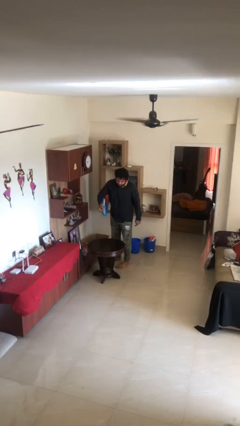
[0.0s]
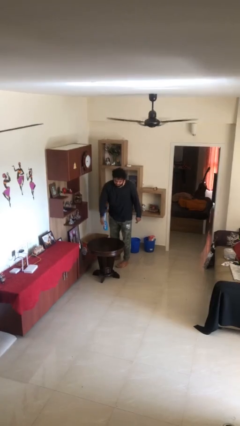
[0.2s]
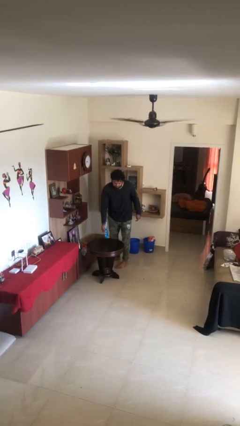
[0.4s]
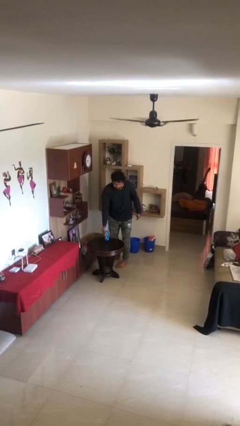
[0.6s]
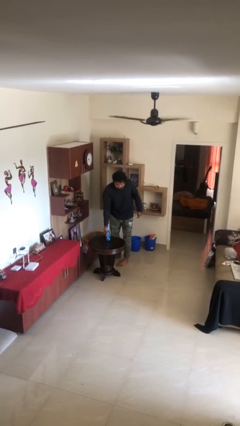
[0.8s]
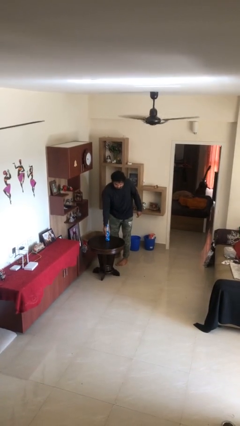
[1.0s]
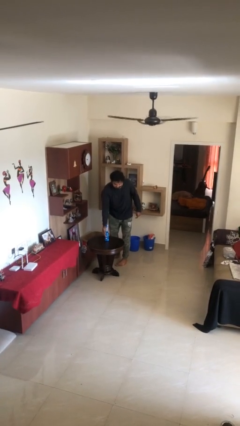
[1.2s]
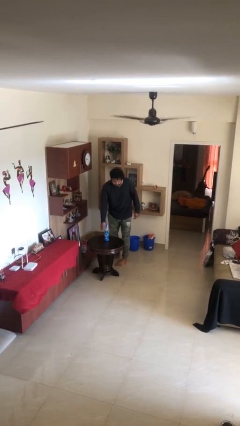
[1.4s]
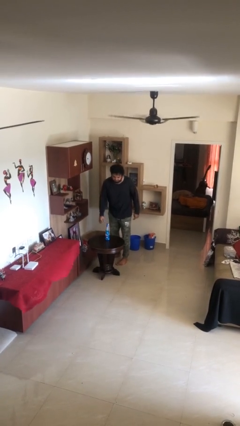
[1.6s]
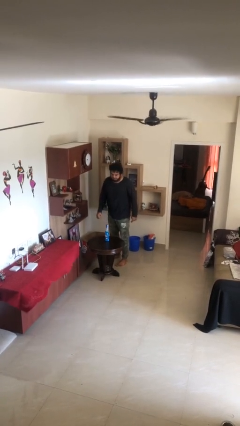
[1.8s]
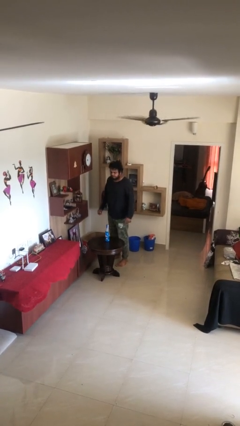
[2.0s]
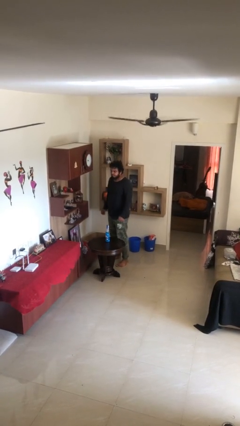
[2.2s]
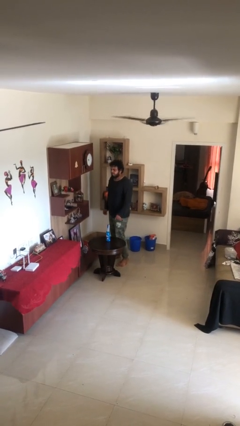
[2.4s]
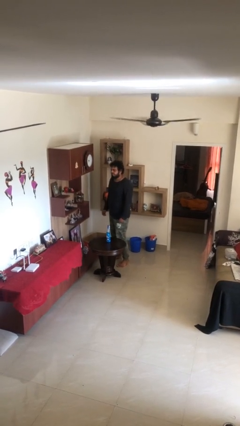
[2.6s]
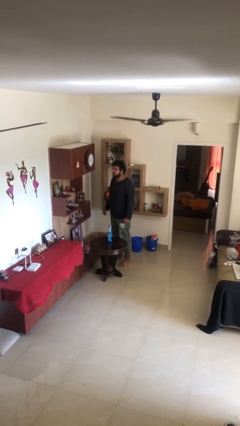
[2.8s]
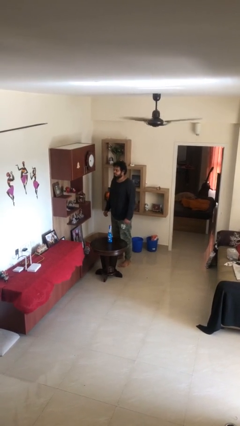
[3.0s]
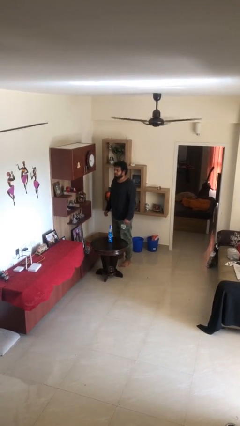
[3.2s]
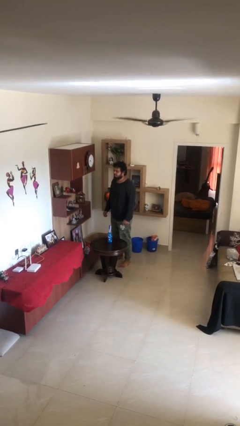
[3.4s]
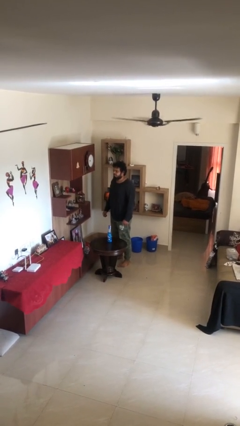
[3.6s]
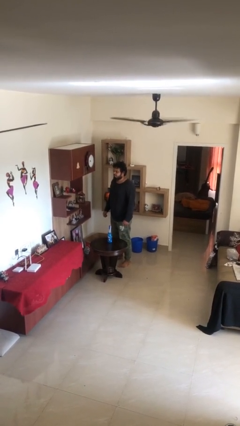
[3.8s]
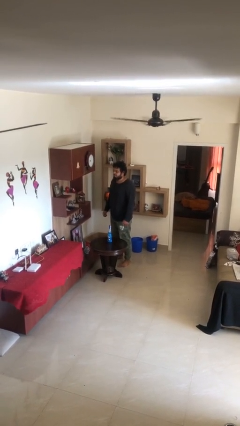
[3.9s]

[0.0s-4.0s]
person puts down object on table

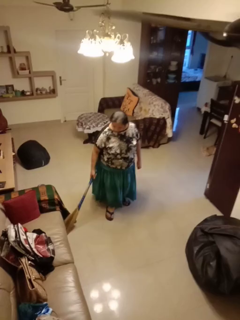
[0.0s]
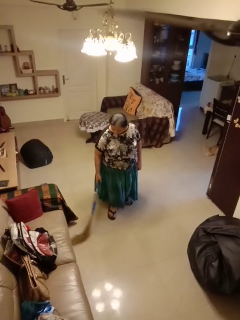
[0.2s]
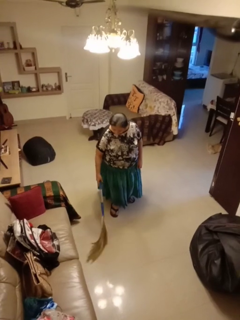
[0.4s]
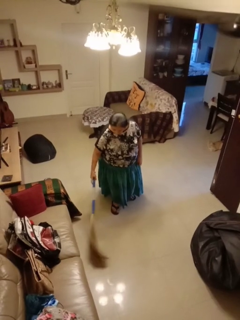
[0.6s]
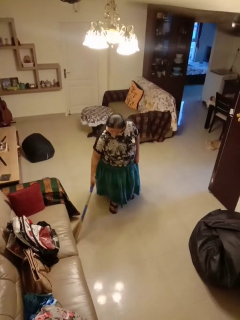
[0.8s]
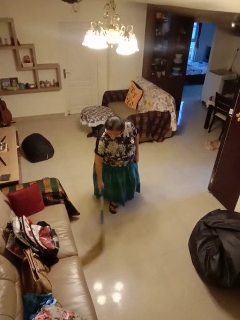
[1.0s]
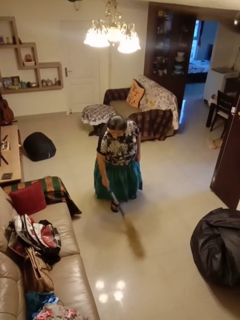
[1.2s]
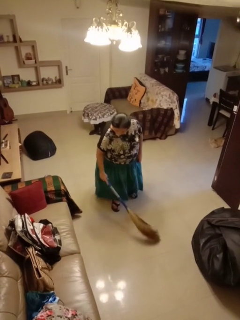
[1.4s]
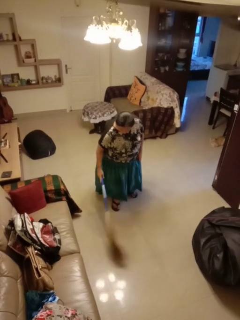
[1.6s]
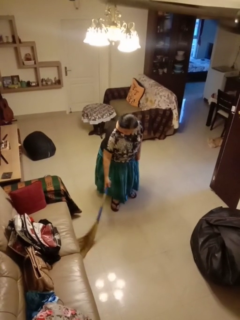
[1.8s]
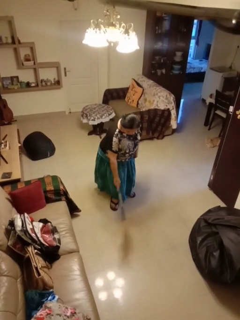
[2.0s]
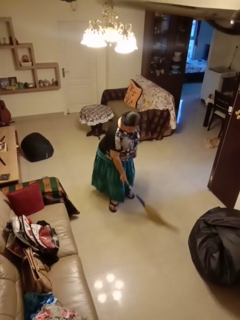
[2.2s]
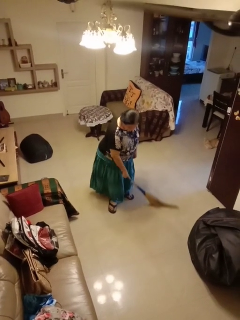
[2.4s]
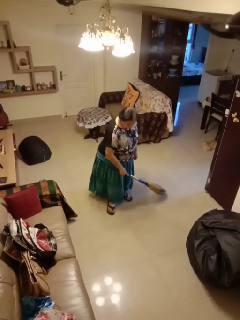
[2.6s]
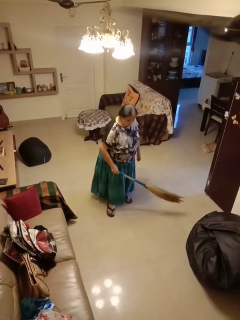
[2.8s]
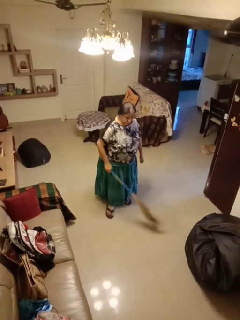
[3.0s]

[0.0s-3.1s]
person sweeps floor

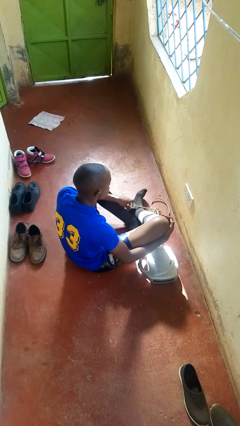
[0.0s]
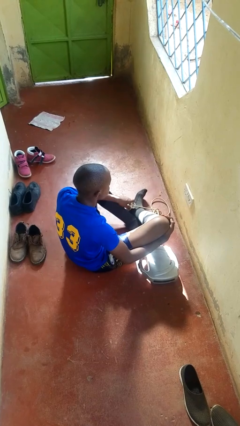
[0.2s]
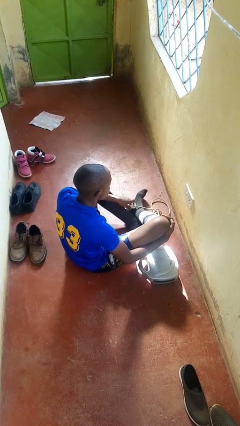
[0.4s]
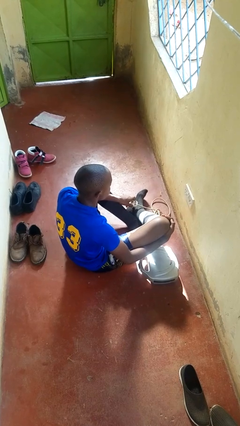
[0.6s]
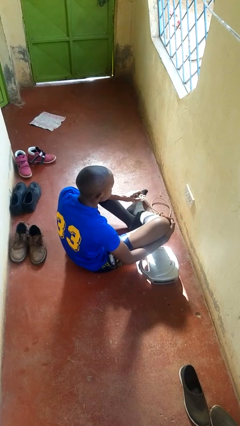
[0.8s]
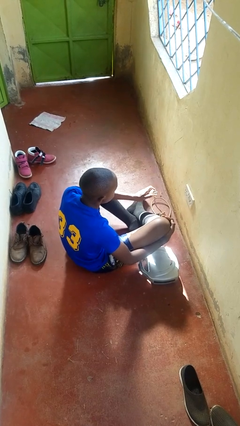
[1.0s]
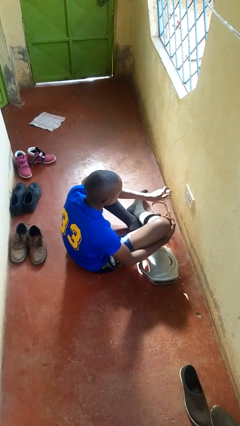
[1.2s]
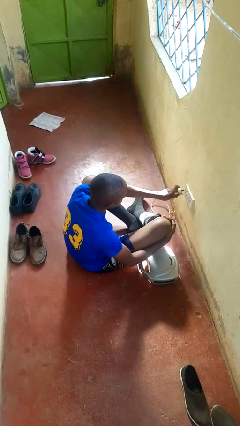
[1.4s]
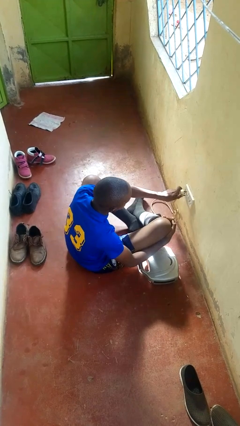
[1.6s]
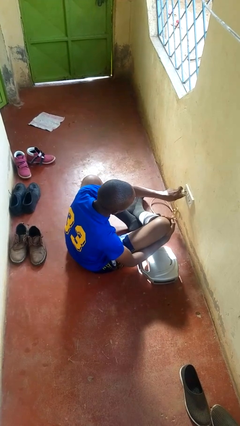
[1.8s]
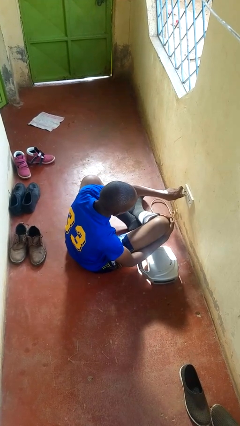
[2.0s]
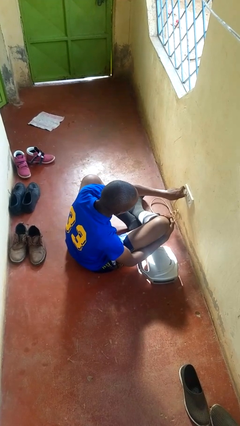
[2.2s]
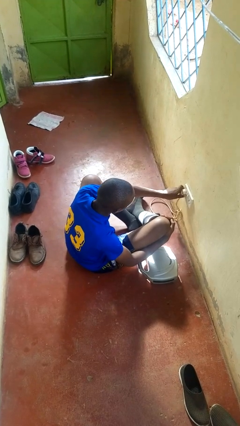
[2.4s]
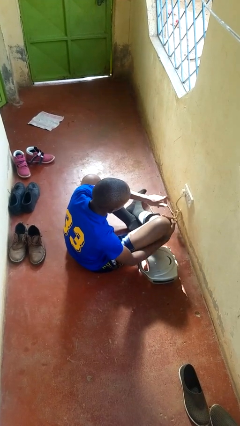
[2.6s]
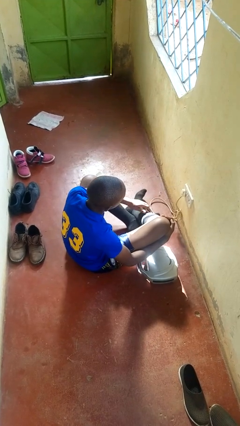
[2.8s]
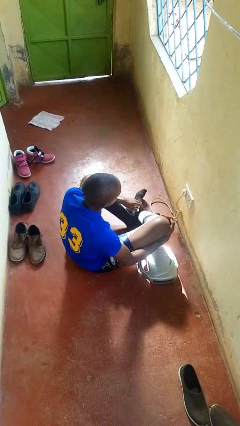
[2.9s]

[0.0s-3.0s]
person plugs into electrical socket

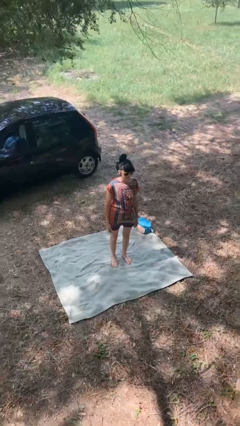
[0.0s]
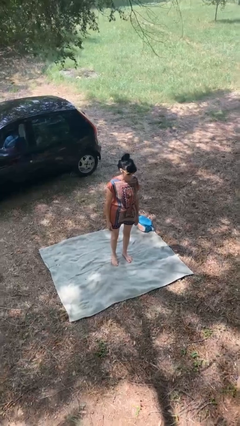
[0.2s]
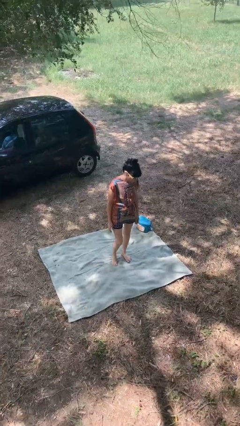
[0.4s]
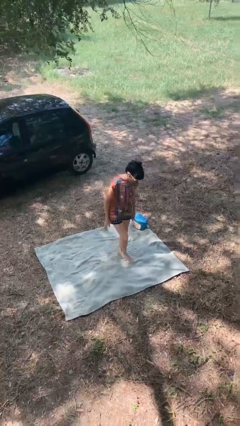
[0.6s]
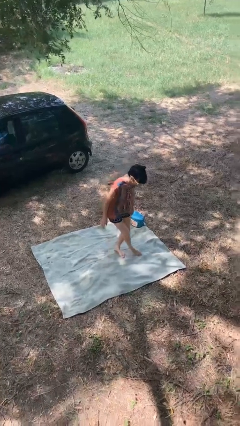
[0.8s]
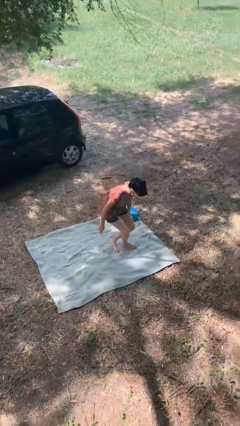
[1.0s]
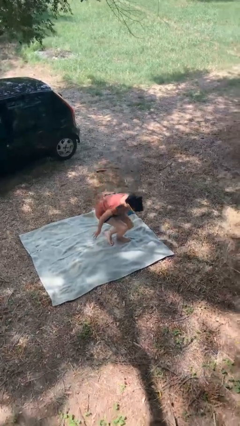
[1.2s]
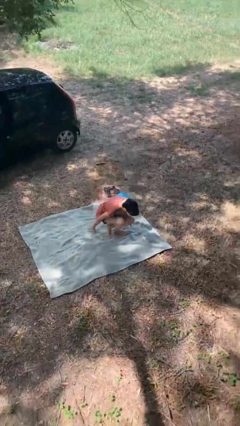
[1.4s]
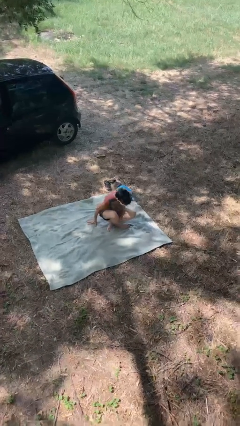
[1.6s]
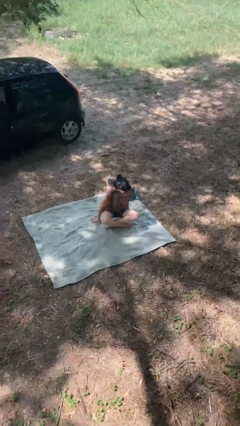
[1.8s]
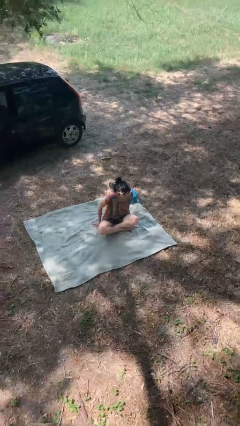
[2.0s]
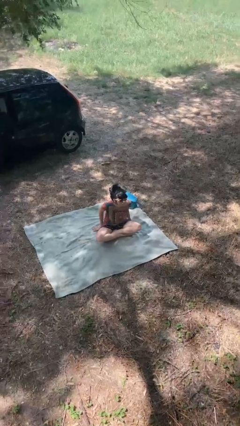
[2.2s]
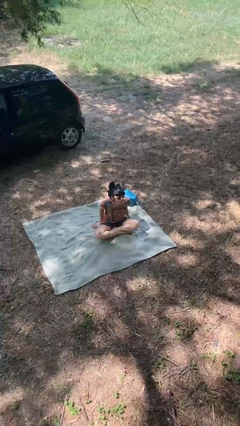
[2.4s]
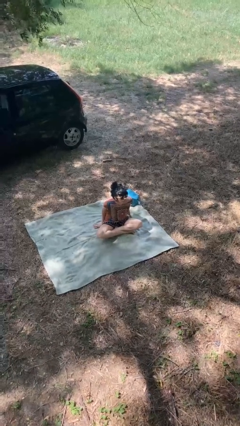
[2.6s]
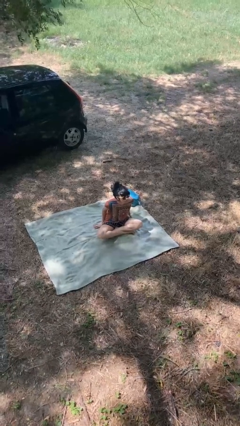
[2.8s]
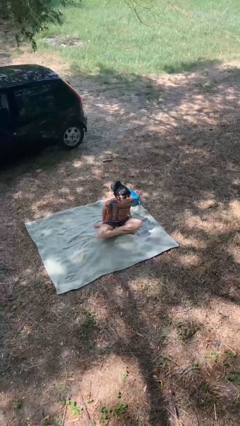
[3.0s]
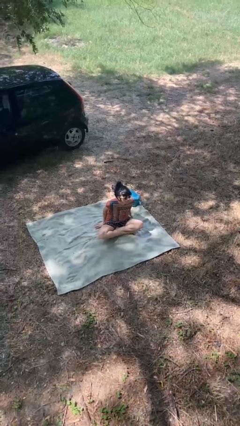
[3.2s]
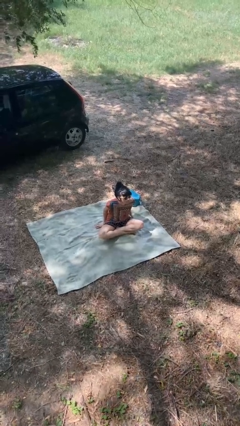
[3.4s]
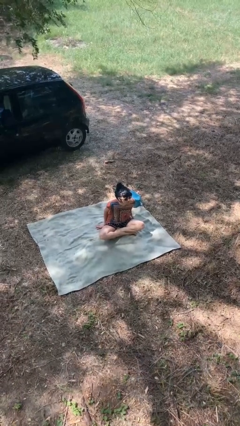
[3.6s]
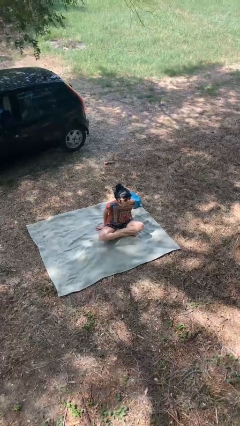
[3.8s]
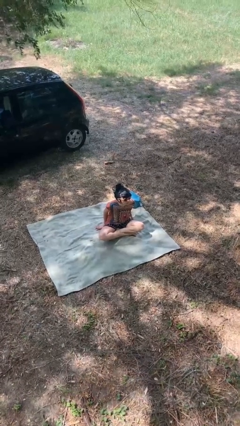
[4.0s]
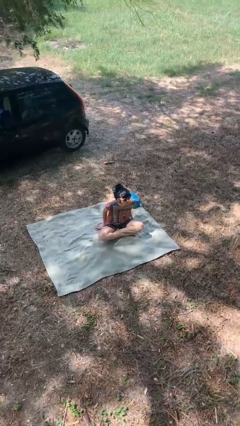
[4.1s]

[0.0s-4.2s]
person sits crisscross

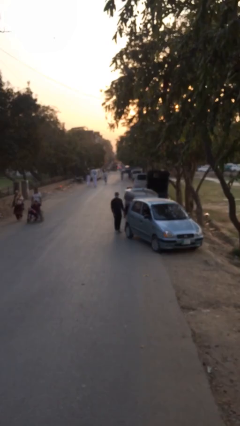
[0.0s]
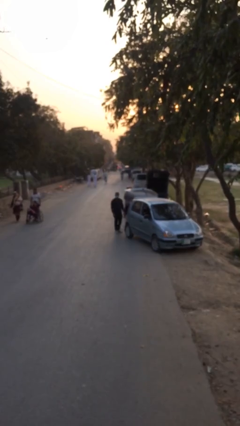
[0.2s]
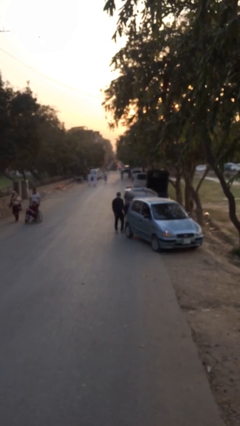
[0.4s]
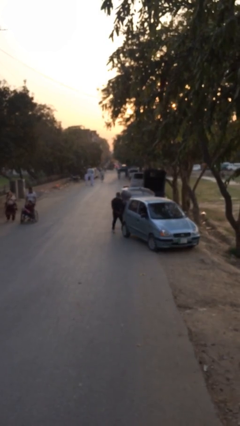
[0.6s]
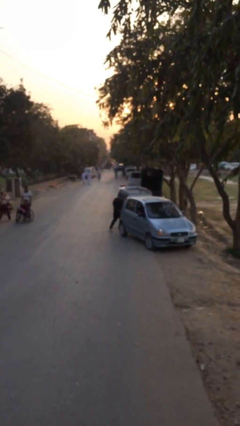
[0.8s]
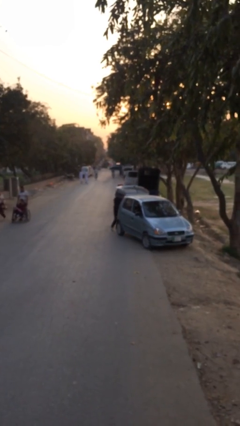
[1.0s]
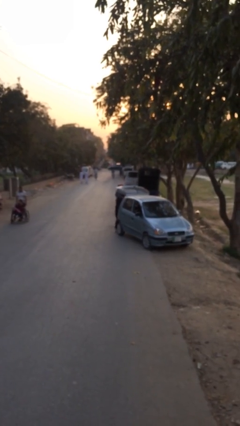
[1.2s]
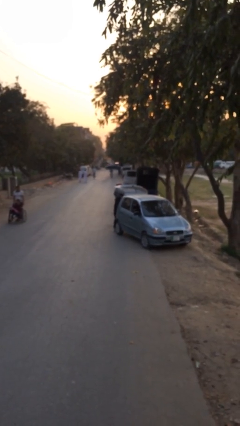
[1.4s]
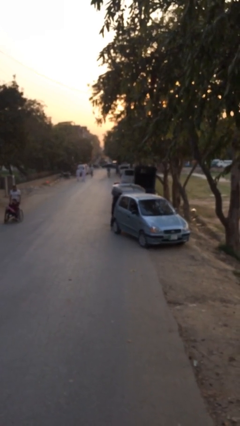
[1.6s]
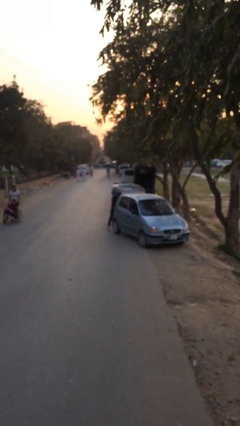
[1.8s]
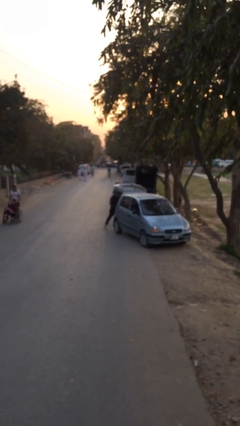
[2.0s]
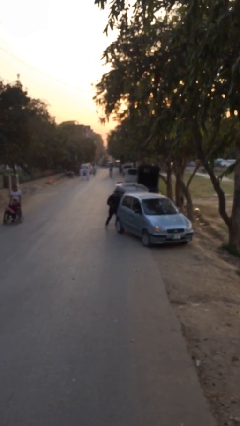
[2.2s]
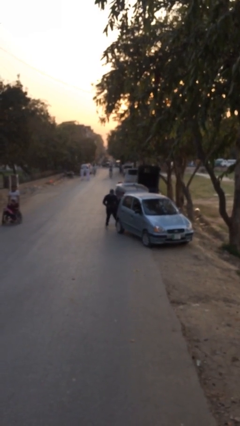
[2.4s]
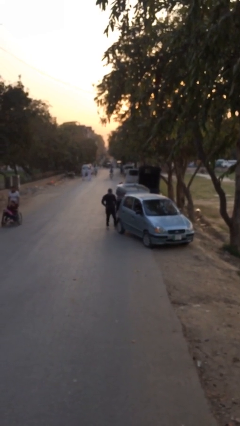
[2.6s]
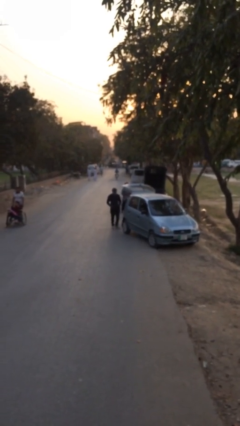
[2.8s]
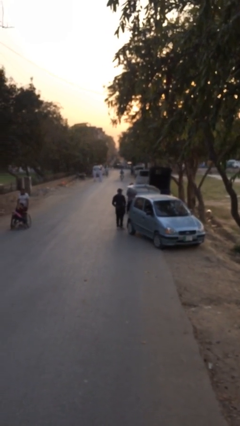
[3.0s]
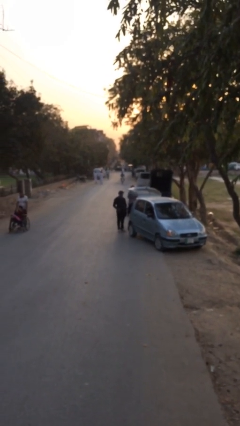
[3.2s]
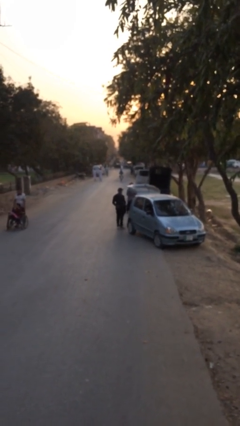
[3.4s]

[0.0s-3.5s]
person unloads car

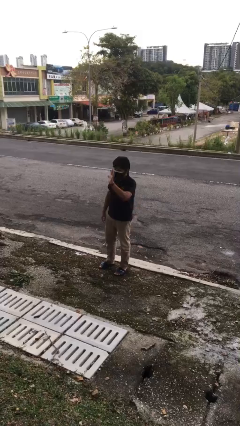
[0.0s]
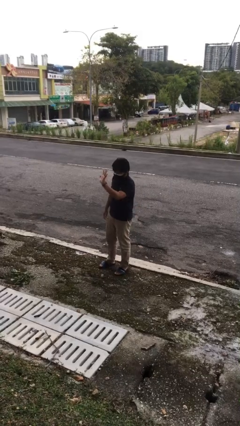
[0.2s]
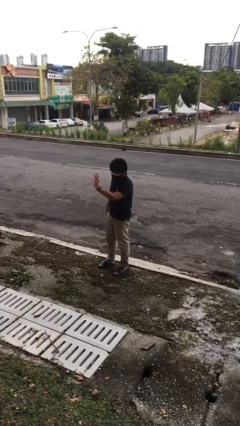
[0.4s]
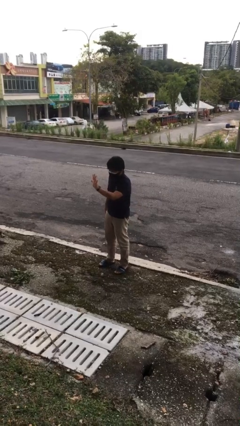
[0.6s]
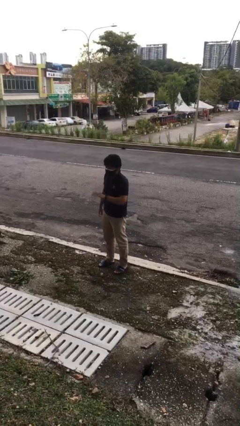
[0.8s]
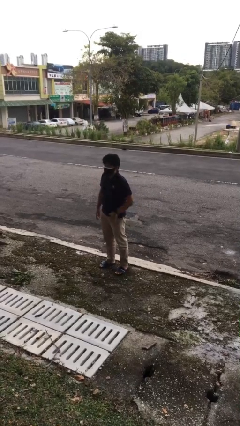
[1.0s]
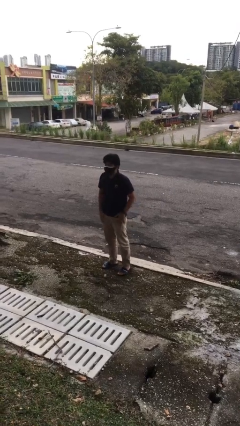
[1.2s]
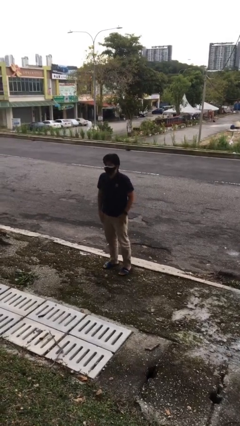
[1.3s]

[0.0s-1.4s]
person gestures stop
